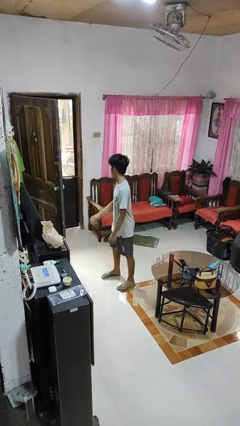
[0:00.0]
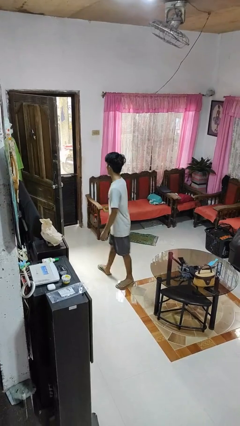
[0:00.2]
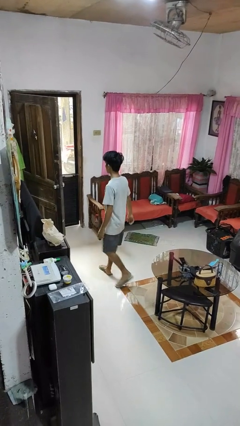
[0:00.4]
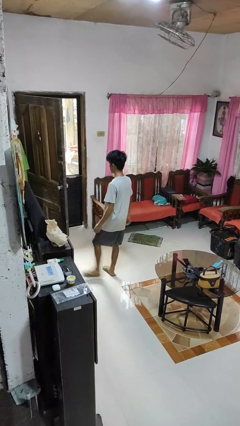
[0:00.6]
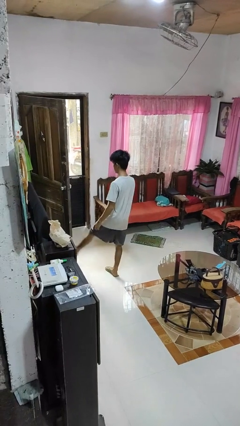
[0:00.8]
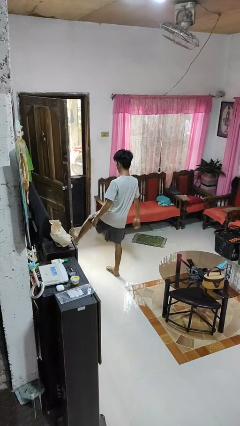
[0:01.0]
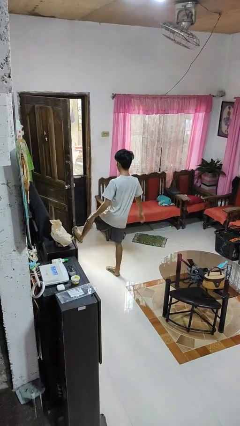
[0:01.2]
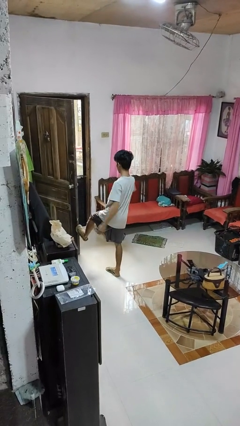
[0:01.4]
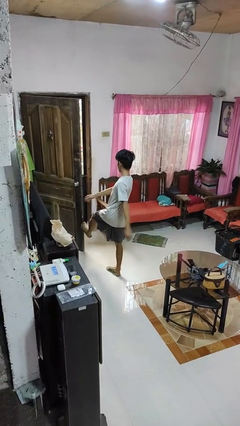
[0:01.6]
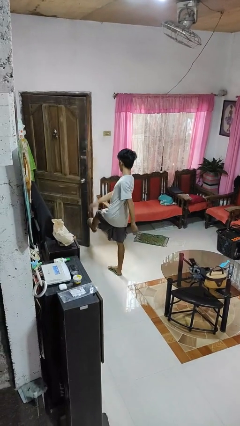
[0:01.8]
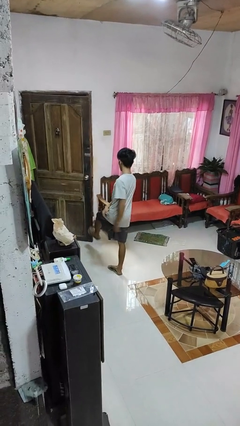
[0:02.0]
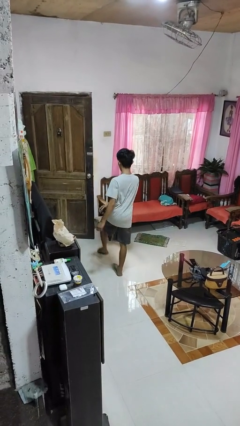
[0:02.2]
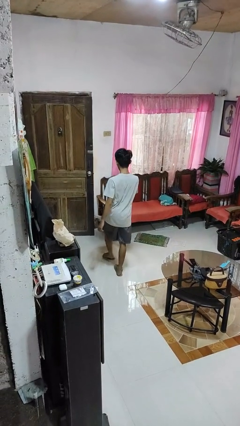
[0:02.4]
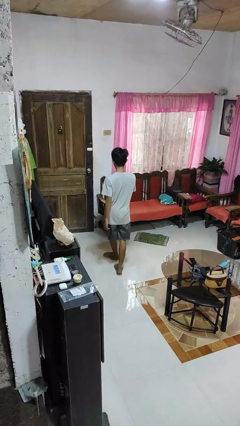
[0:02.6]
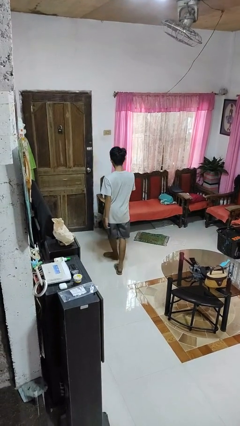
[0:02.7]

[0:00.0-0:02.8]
person closes door with foot

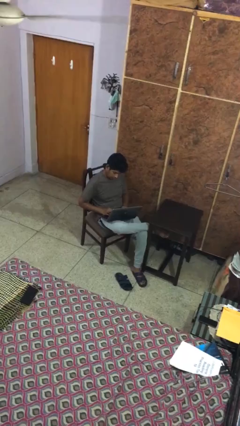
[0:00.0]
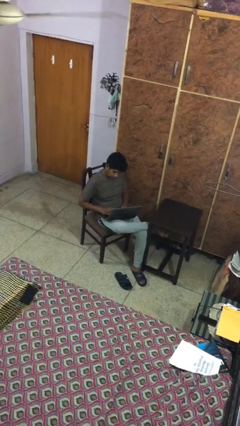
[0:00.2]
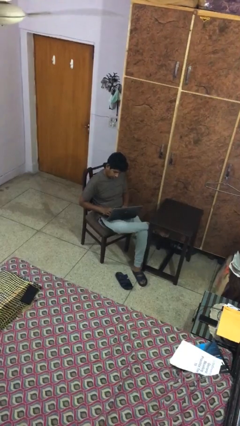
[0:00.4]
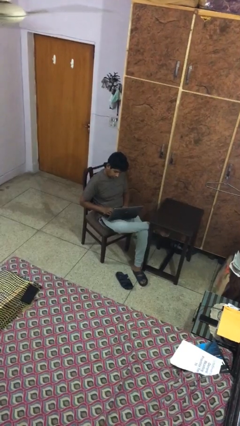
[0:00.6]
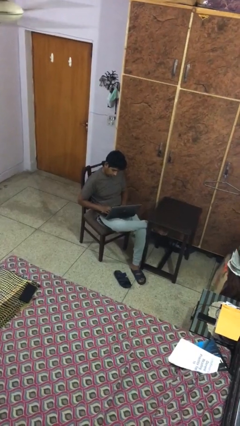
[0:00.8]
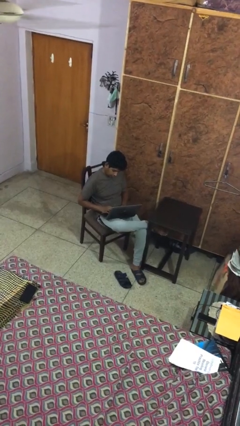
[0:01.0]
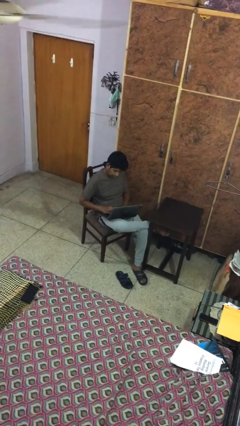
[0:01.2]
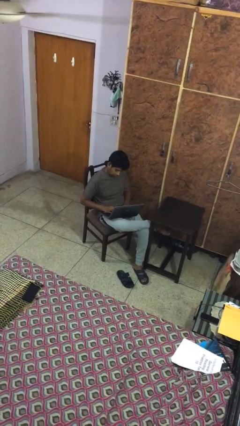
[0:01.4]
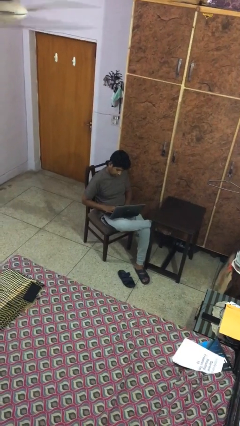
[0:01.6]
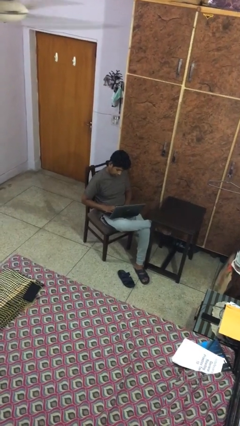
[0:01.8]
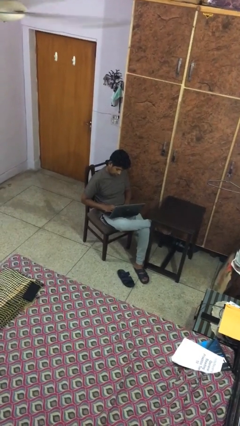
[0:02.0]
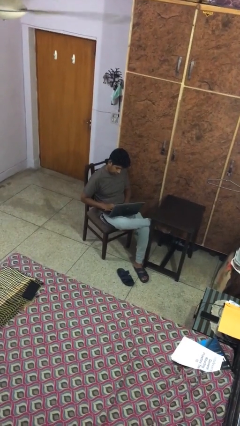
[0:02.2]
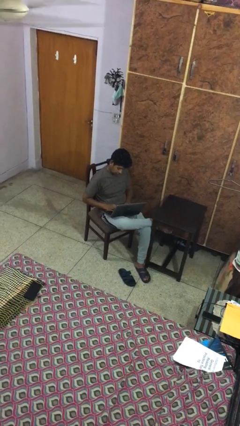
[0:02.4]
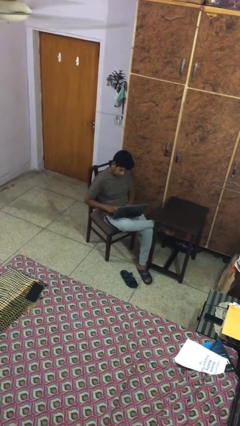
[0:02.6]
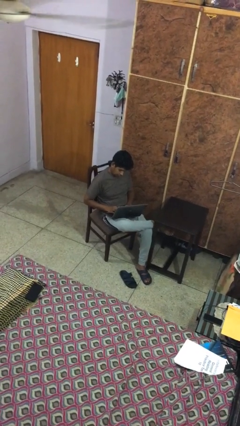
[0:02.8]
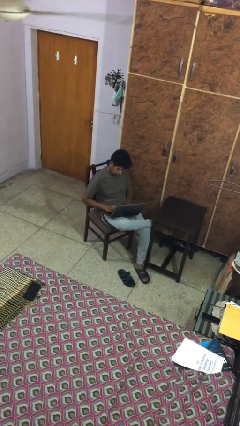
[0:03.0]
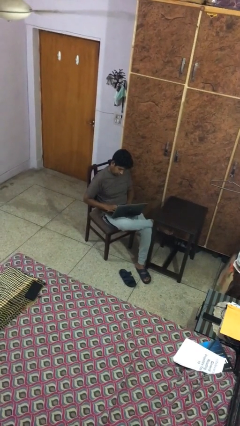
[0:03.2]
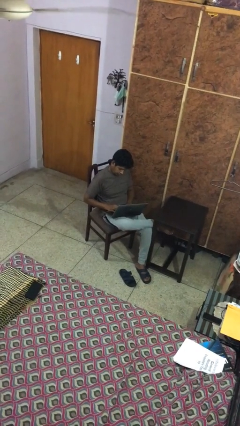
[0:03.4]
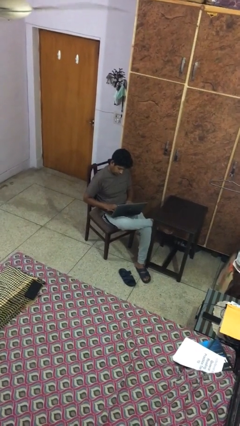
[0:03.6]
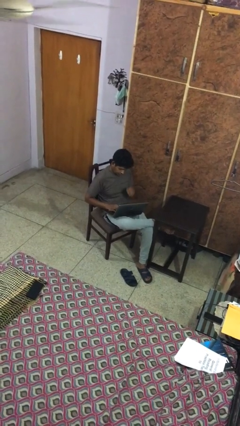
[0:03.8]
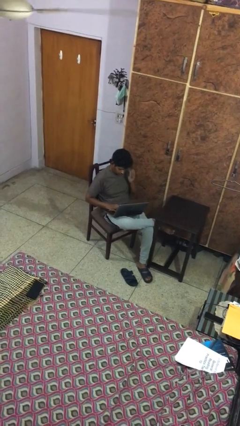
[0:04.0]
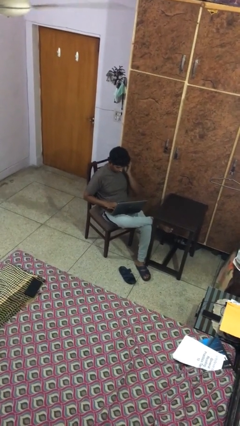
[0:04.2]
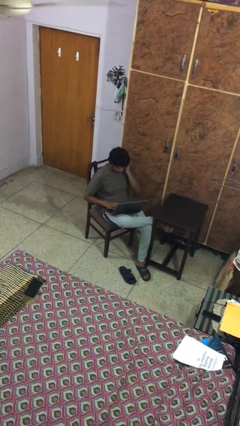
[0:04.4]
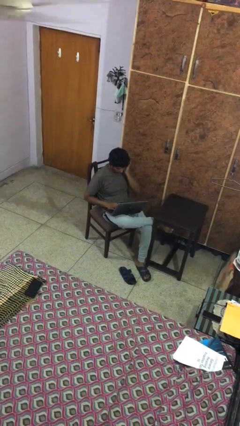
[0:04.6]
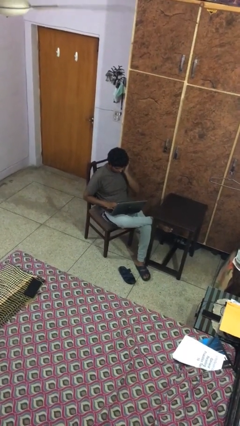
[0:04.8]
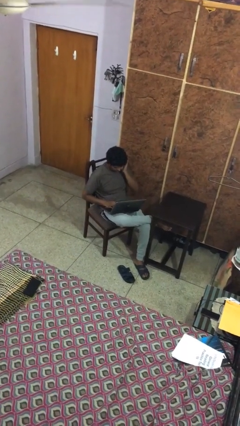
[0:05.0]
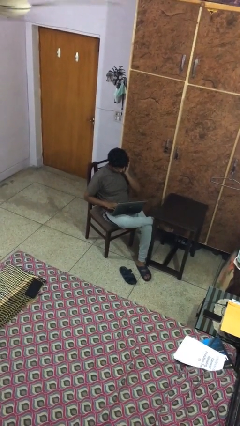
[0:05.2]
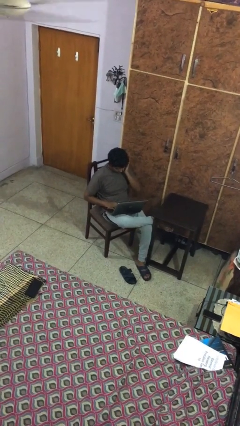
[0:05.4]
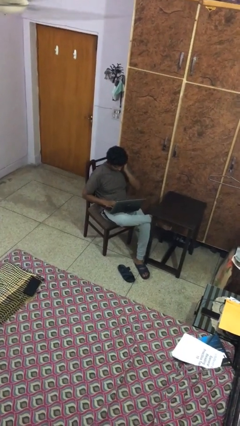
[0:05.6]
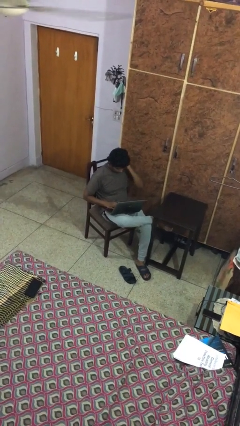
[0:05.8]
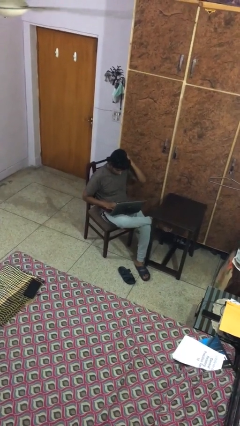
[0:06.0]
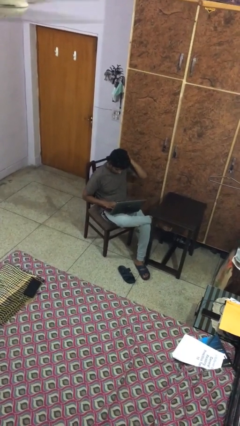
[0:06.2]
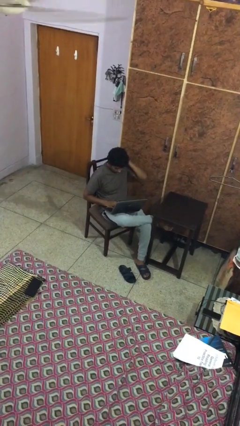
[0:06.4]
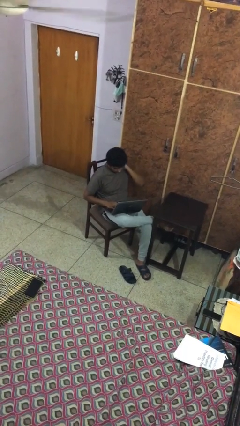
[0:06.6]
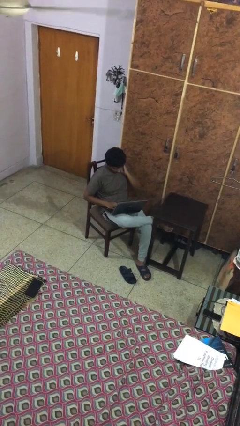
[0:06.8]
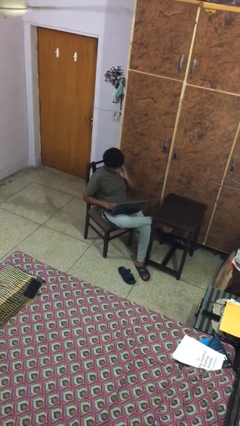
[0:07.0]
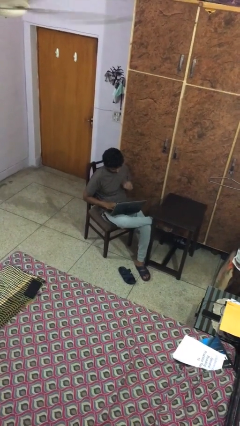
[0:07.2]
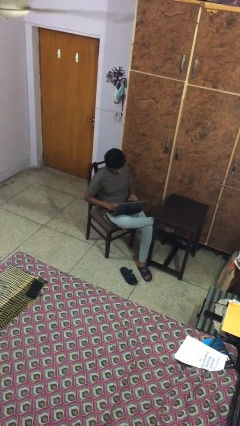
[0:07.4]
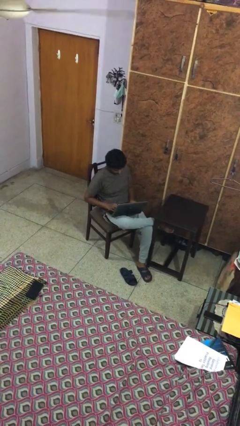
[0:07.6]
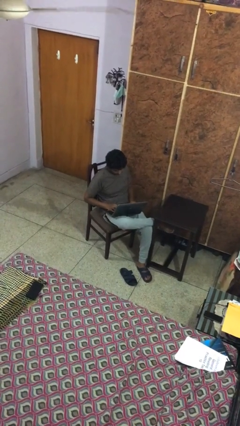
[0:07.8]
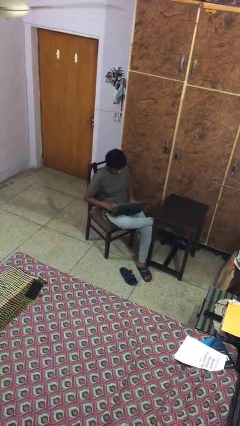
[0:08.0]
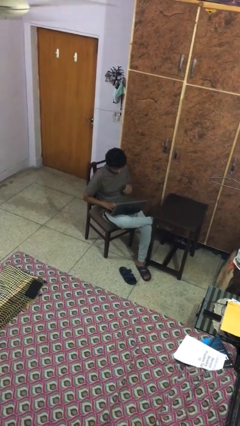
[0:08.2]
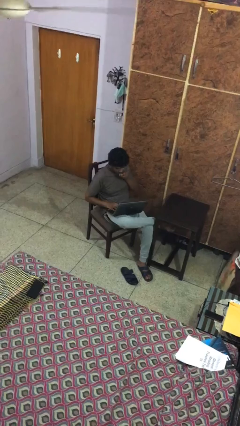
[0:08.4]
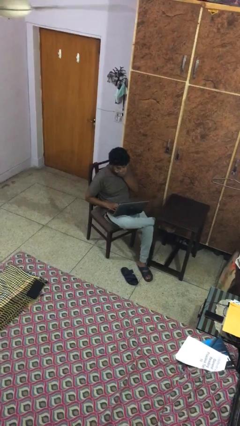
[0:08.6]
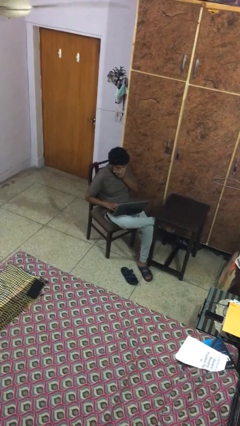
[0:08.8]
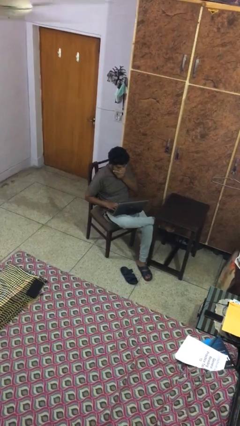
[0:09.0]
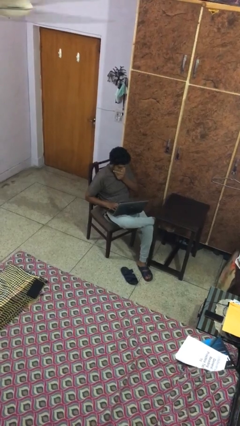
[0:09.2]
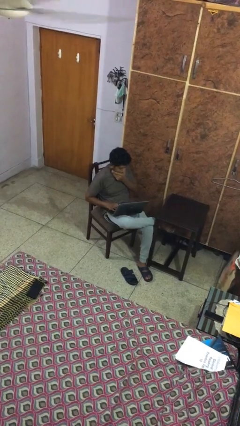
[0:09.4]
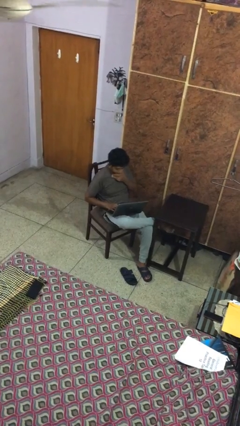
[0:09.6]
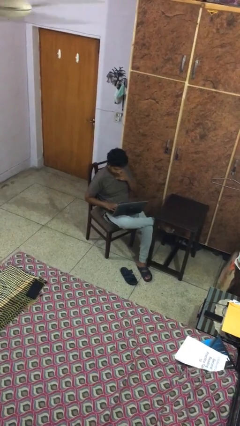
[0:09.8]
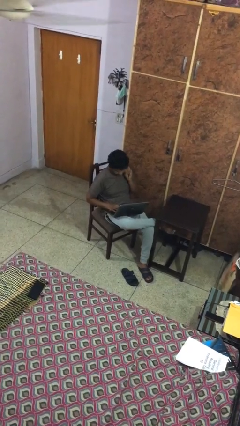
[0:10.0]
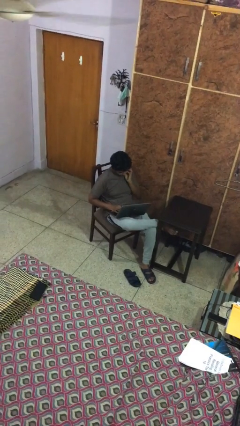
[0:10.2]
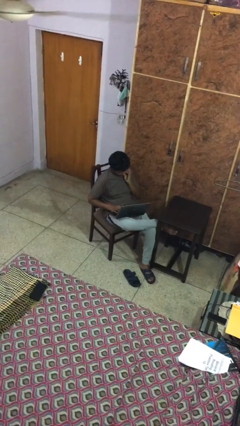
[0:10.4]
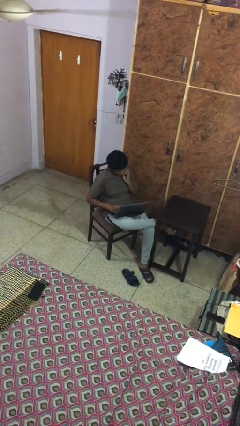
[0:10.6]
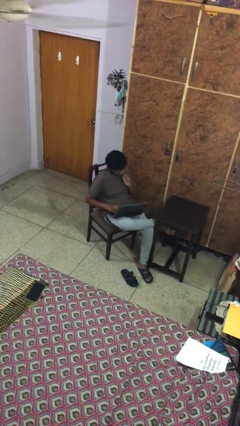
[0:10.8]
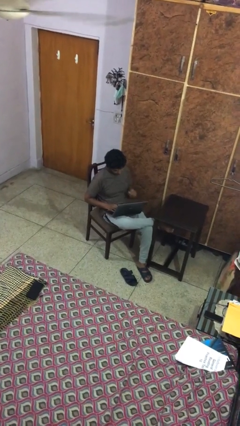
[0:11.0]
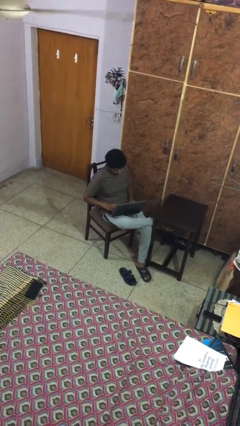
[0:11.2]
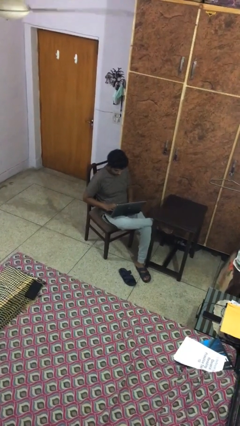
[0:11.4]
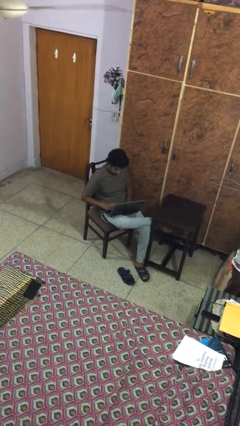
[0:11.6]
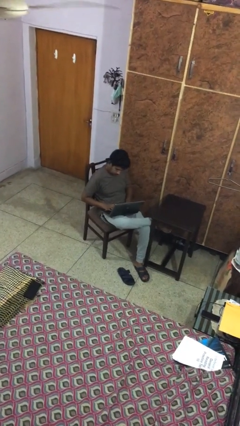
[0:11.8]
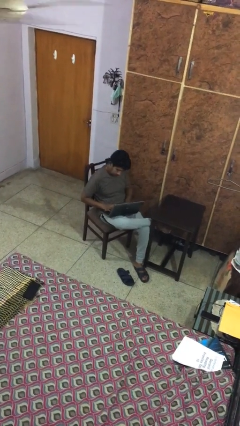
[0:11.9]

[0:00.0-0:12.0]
person interacts with laptop

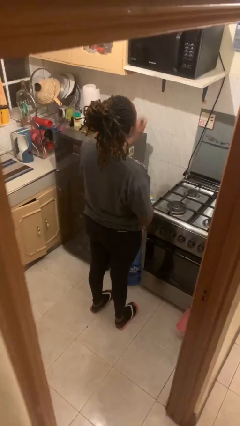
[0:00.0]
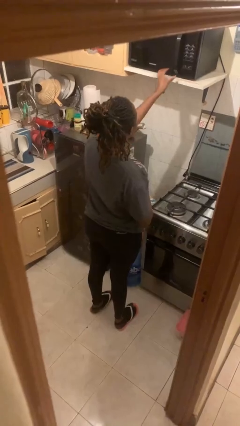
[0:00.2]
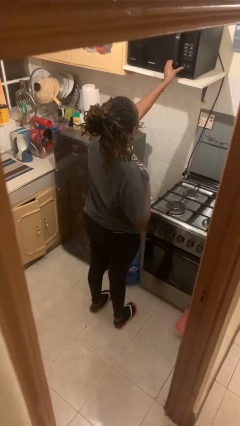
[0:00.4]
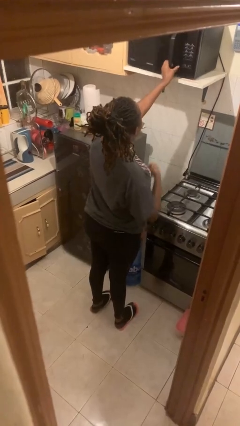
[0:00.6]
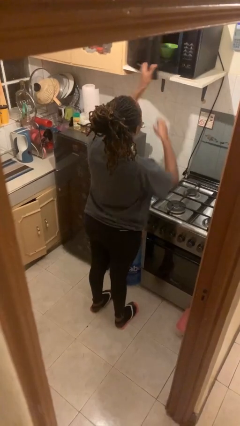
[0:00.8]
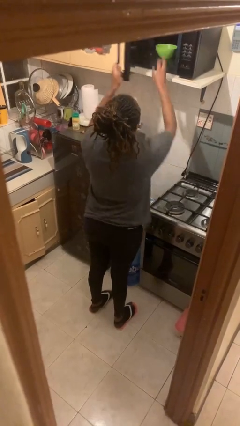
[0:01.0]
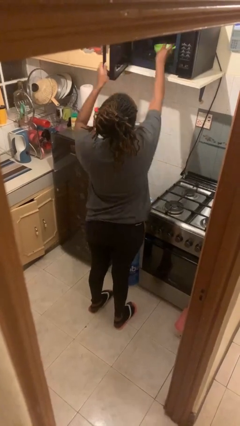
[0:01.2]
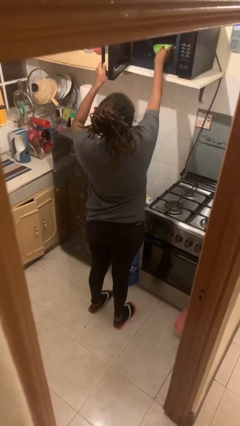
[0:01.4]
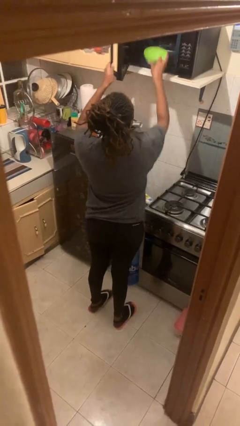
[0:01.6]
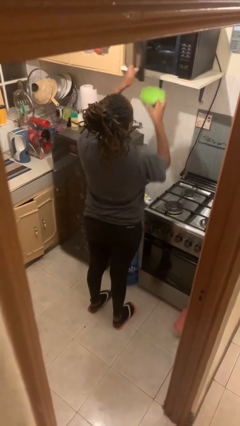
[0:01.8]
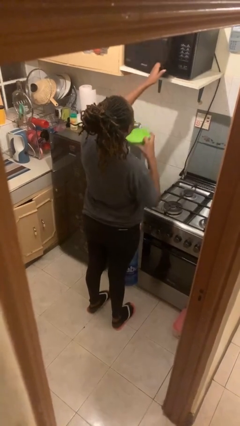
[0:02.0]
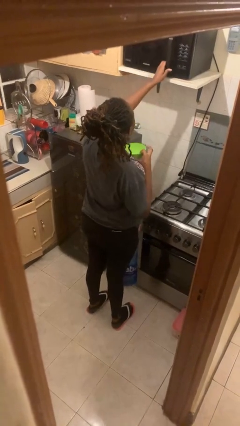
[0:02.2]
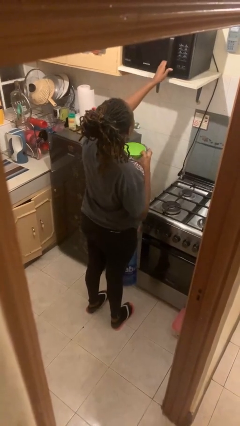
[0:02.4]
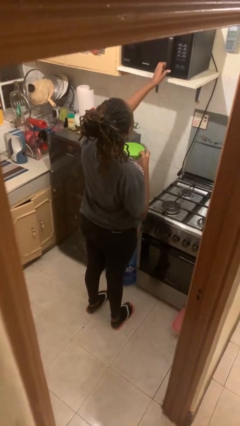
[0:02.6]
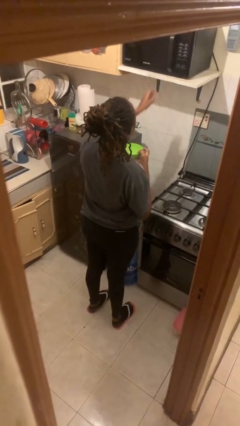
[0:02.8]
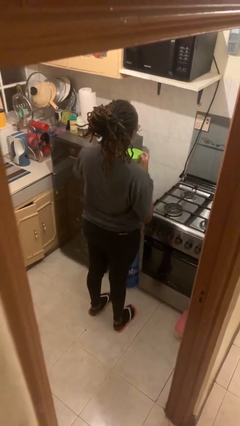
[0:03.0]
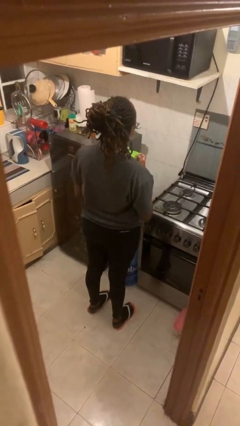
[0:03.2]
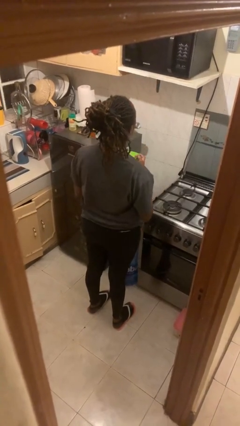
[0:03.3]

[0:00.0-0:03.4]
person takes object from microwave
